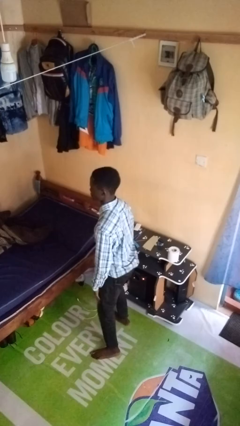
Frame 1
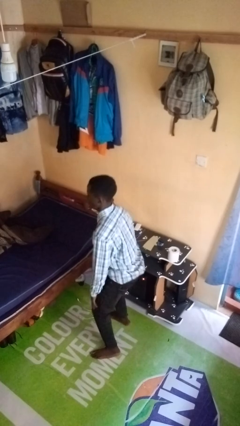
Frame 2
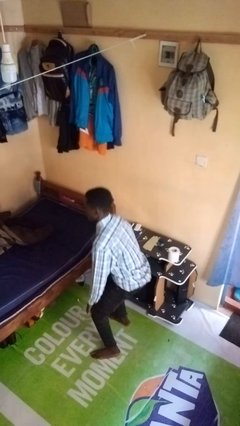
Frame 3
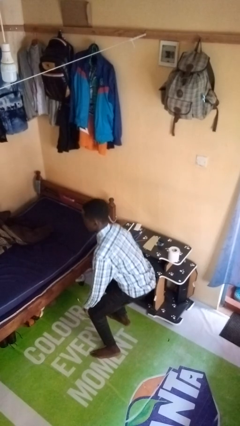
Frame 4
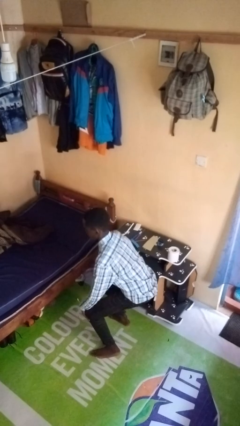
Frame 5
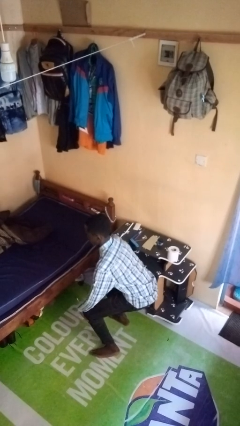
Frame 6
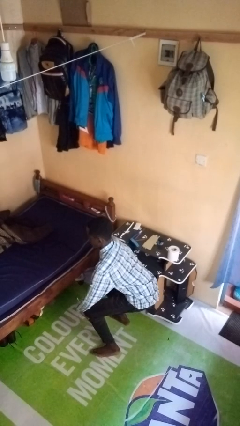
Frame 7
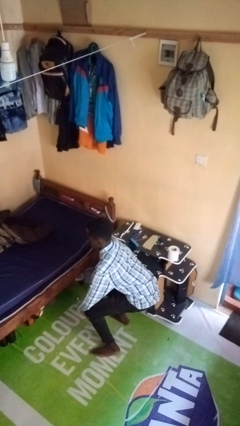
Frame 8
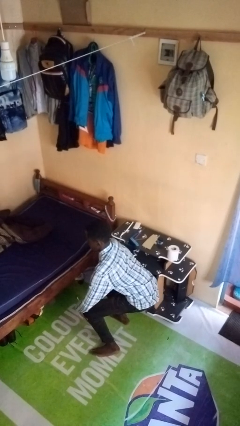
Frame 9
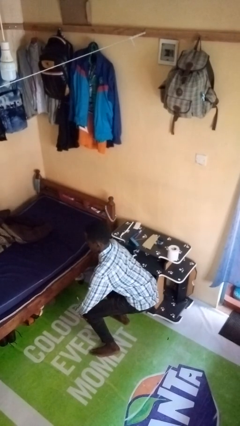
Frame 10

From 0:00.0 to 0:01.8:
person squats

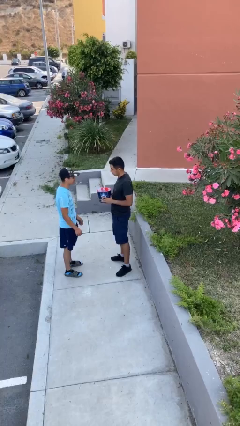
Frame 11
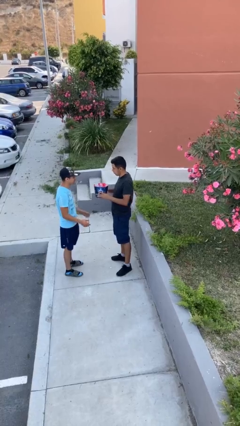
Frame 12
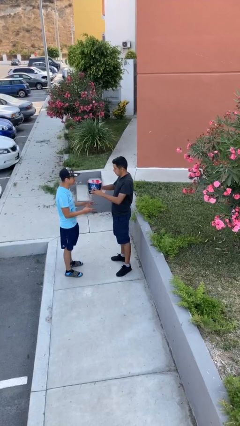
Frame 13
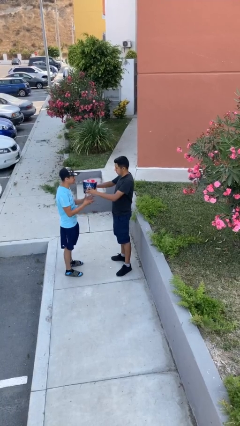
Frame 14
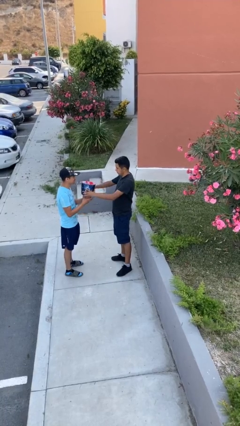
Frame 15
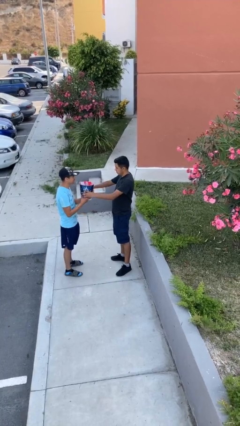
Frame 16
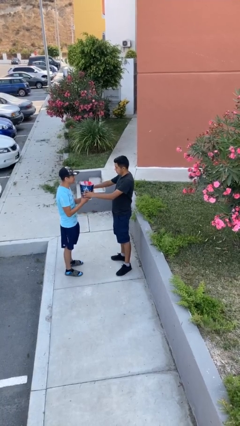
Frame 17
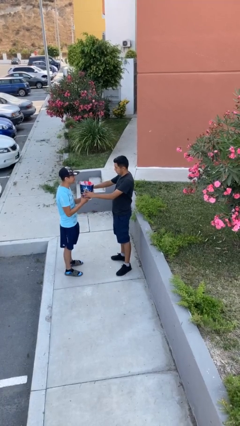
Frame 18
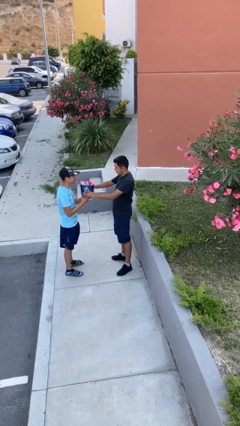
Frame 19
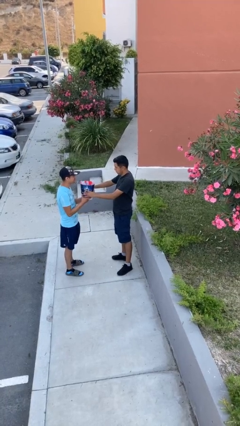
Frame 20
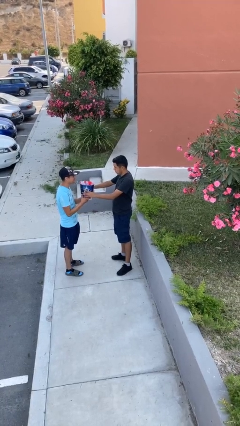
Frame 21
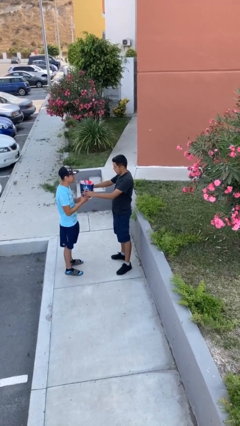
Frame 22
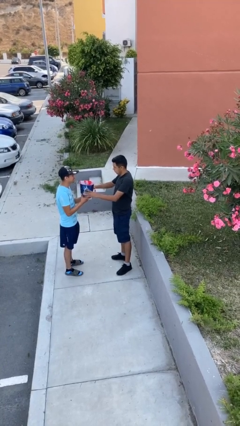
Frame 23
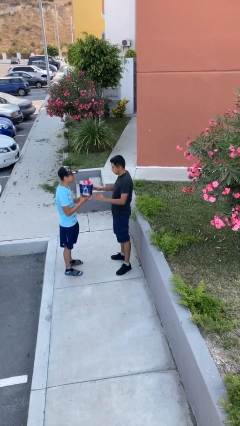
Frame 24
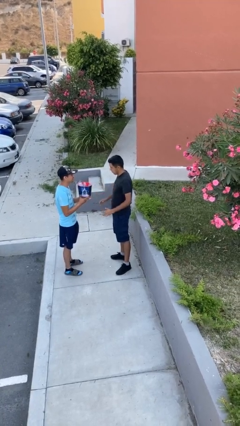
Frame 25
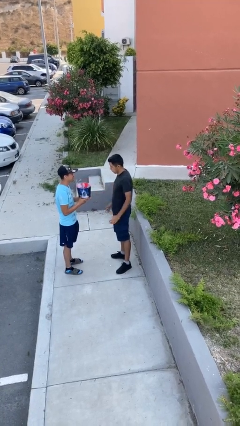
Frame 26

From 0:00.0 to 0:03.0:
person transfers object to person

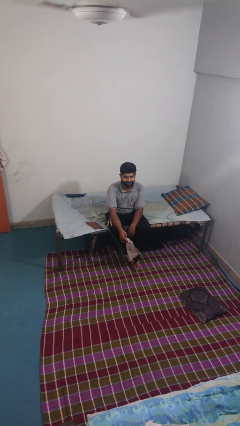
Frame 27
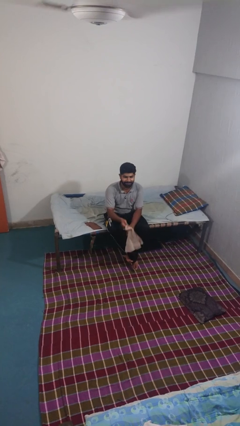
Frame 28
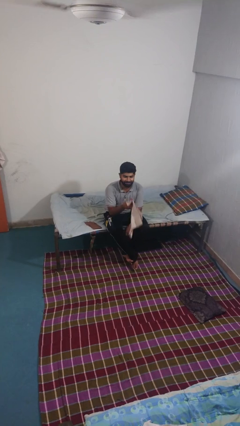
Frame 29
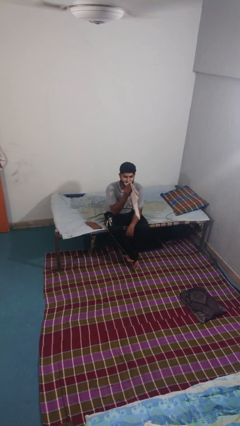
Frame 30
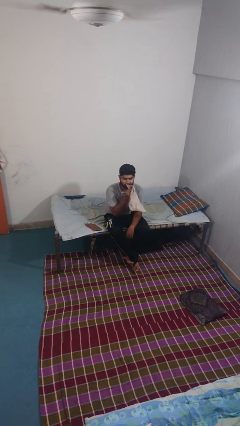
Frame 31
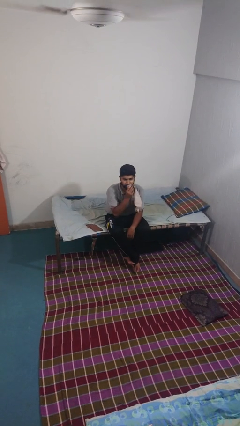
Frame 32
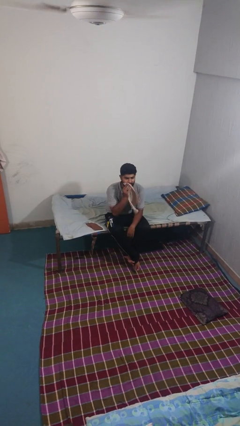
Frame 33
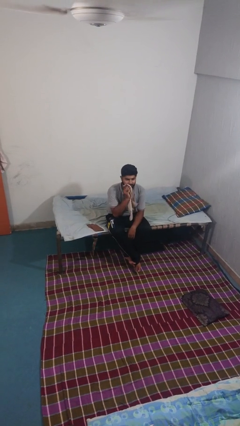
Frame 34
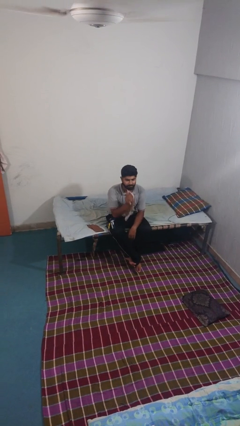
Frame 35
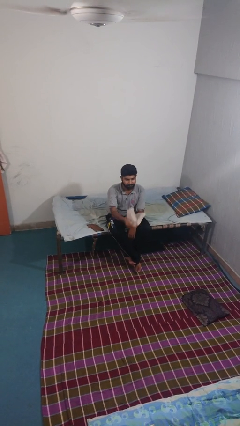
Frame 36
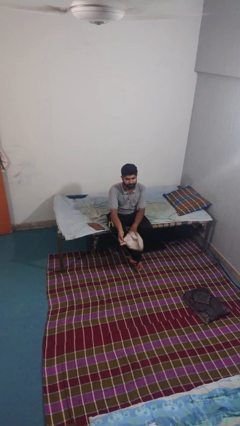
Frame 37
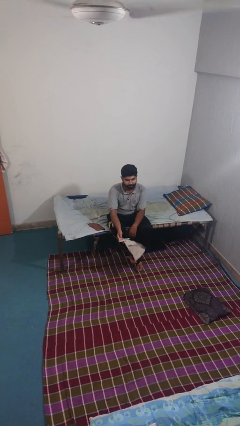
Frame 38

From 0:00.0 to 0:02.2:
person wipes mouth with napkin

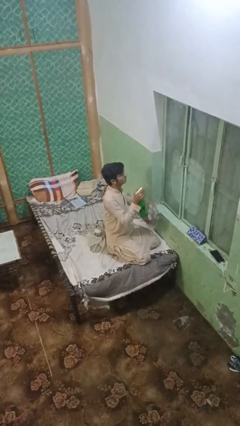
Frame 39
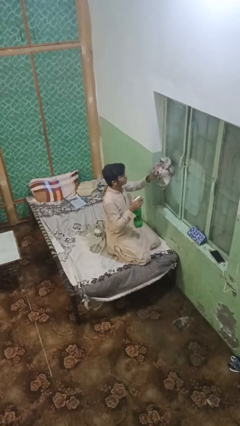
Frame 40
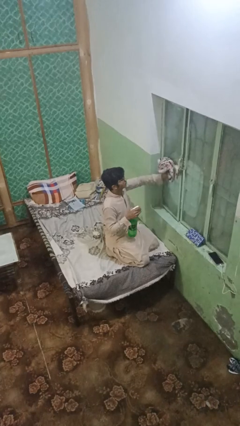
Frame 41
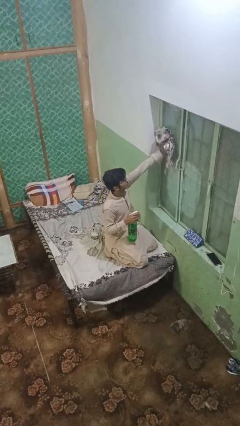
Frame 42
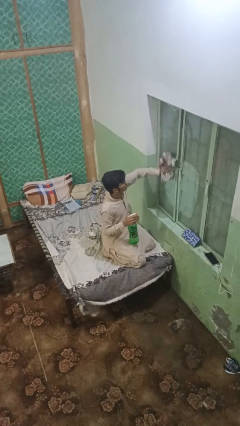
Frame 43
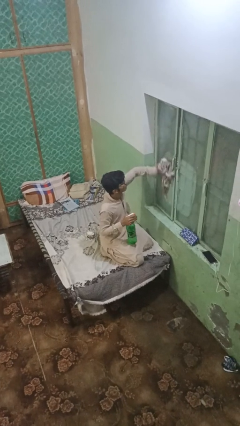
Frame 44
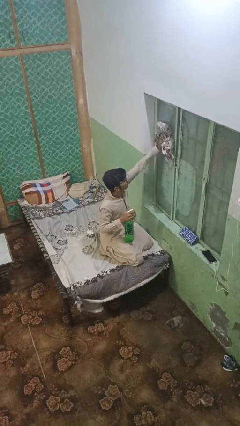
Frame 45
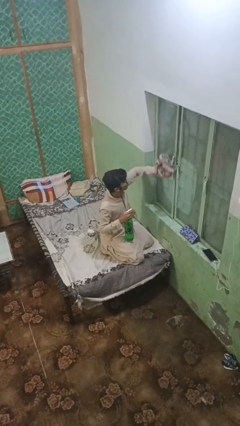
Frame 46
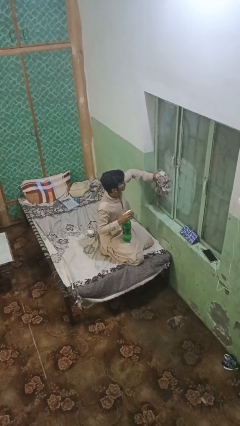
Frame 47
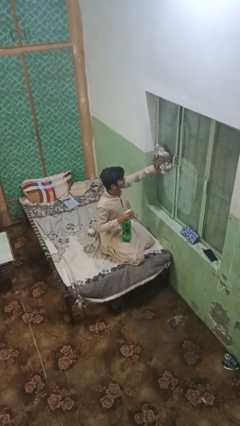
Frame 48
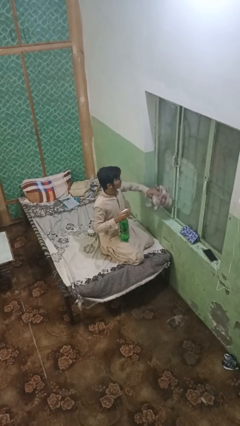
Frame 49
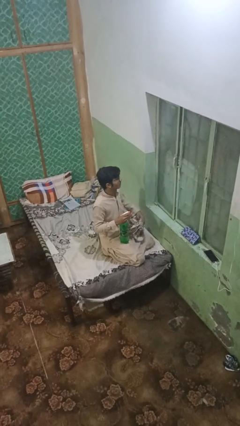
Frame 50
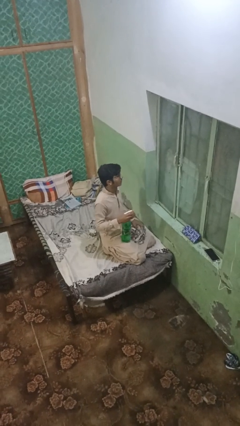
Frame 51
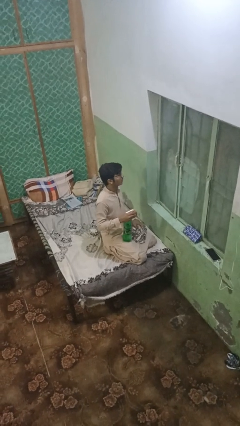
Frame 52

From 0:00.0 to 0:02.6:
person washes window

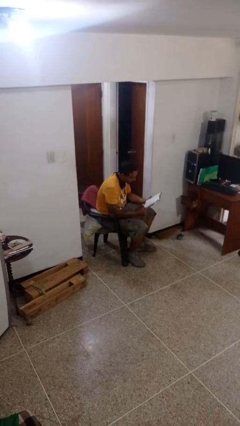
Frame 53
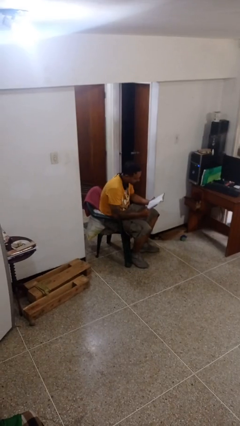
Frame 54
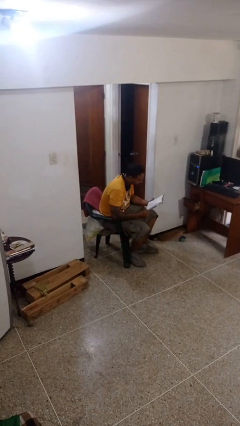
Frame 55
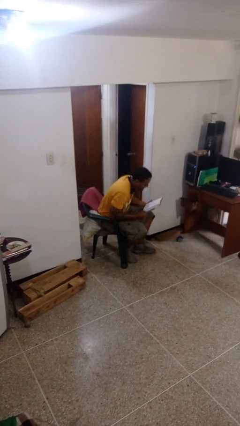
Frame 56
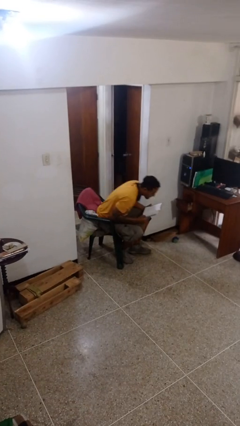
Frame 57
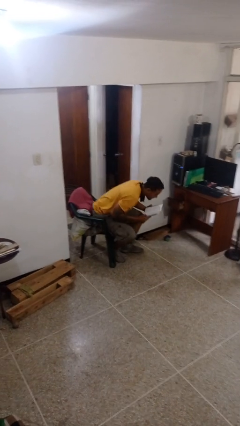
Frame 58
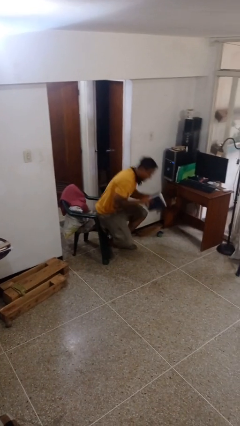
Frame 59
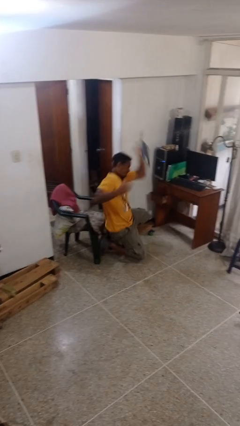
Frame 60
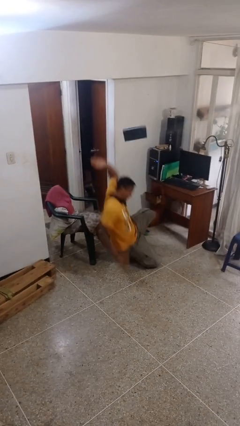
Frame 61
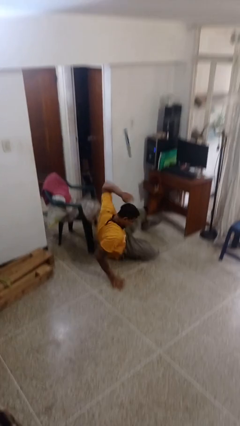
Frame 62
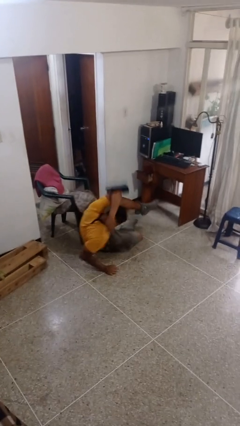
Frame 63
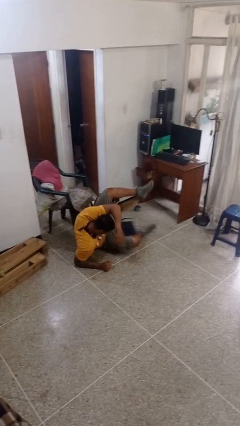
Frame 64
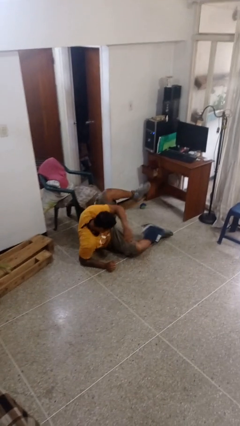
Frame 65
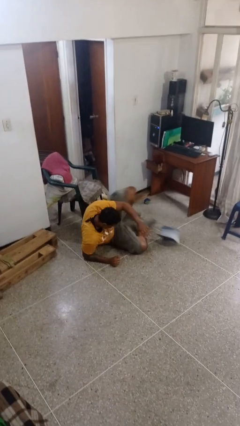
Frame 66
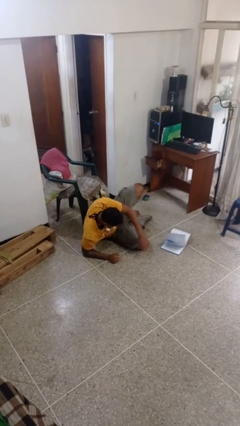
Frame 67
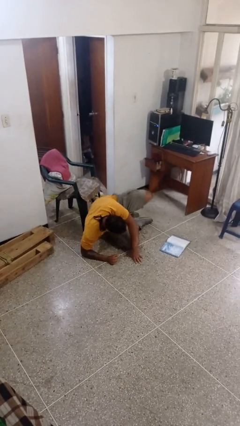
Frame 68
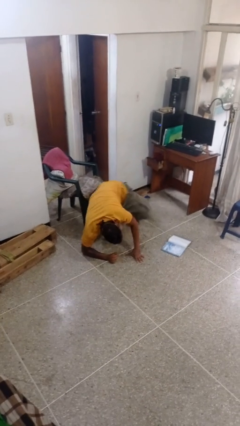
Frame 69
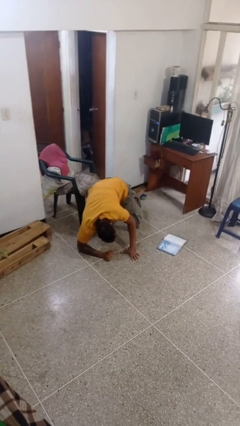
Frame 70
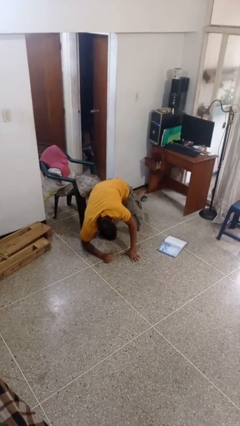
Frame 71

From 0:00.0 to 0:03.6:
person falls from chair

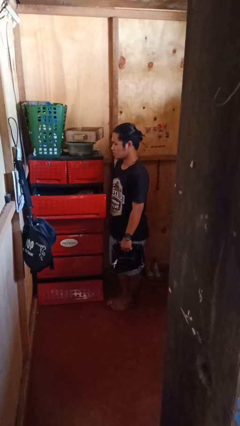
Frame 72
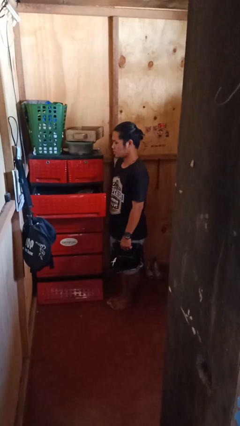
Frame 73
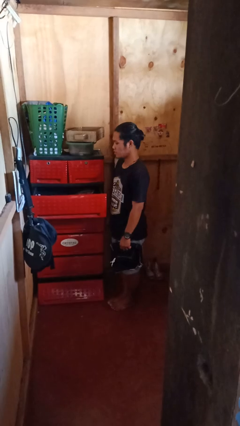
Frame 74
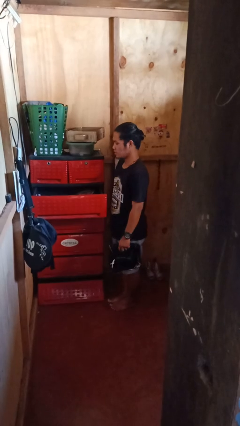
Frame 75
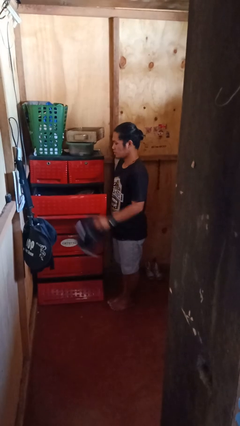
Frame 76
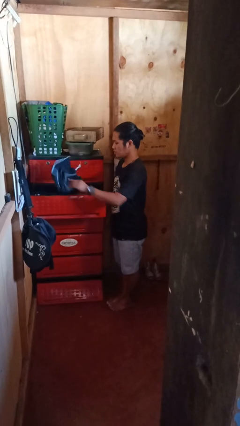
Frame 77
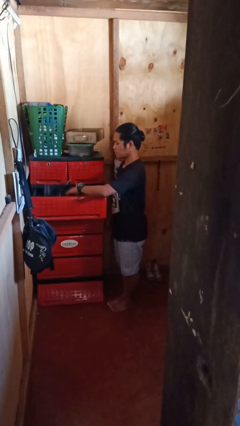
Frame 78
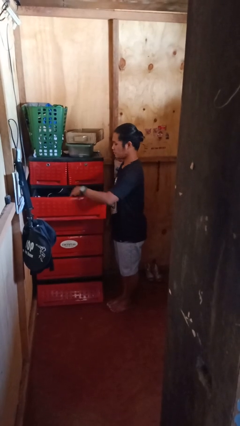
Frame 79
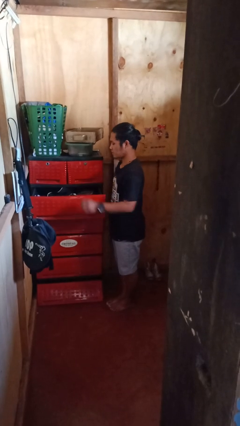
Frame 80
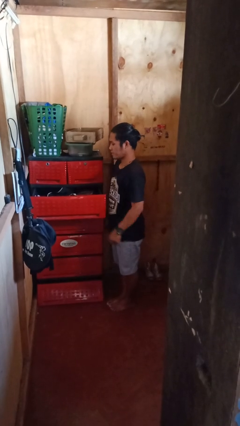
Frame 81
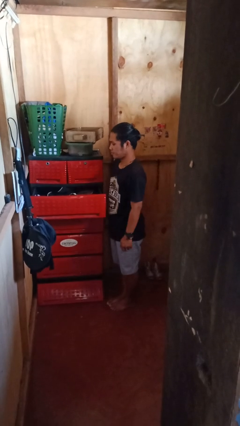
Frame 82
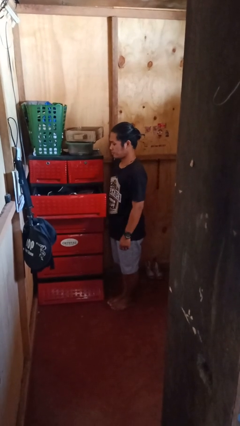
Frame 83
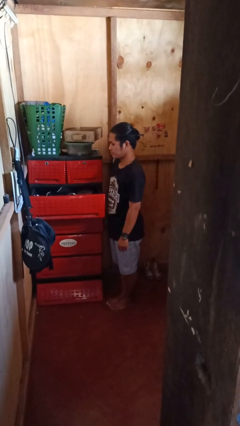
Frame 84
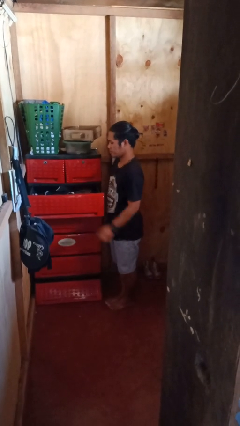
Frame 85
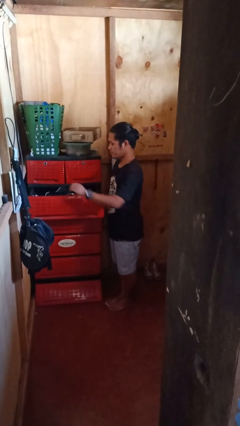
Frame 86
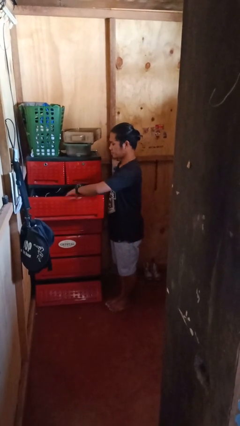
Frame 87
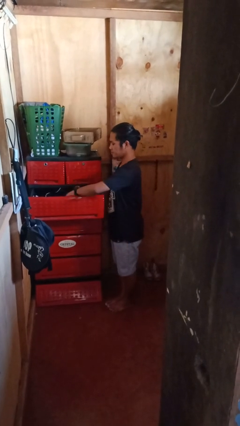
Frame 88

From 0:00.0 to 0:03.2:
person puts clothes into dresser

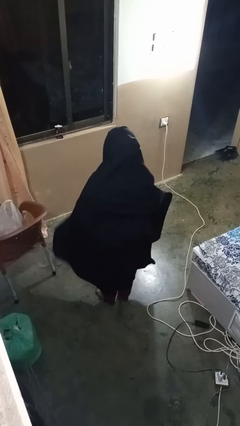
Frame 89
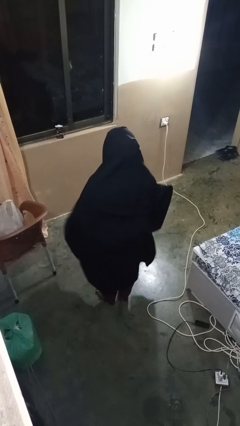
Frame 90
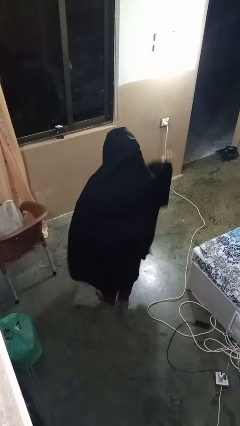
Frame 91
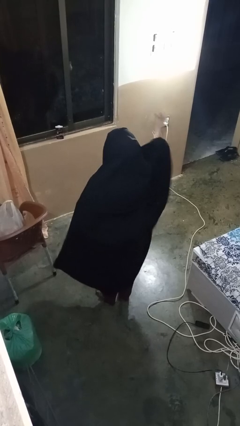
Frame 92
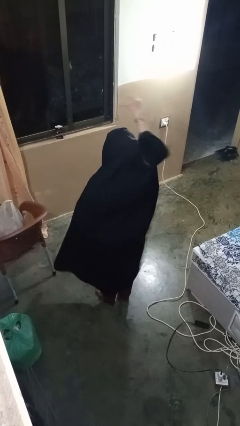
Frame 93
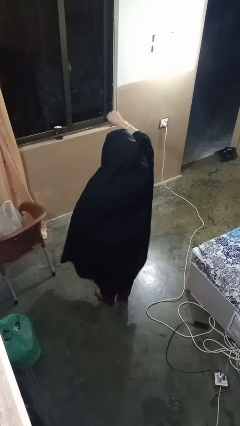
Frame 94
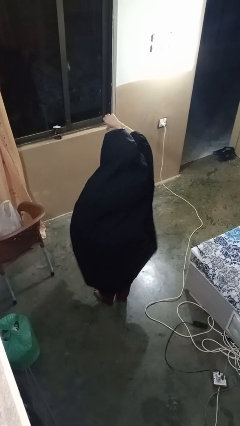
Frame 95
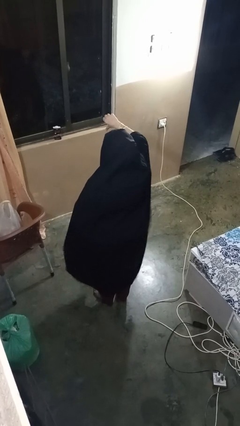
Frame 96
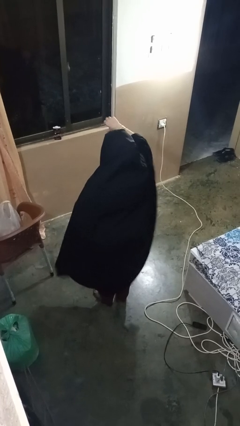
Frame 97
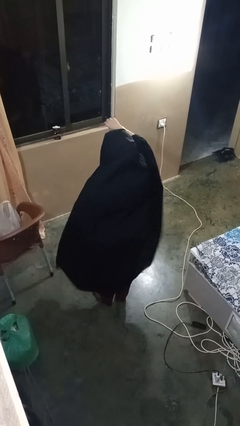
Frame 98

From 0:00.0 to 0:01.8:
person gestures thumbs down
